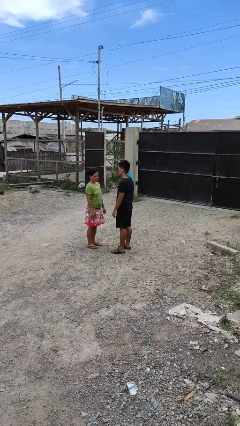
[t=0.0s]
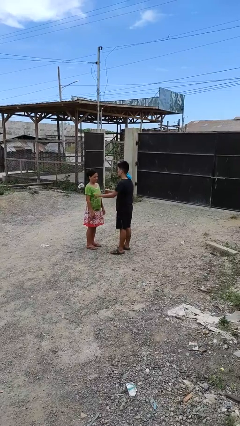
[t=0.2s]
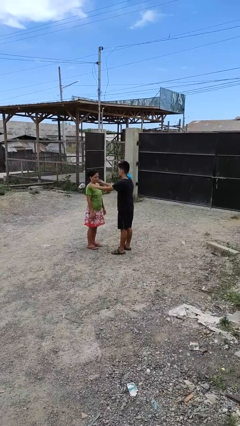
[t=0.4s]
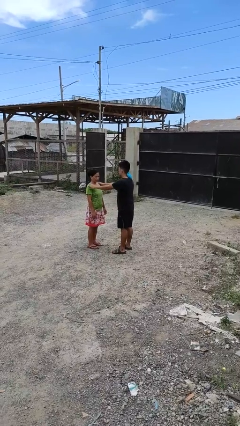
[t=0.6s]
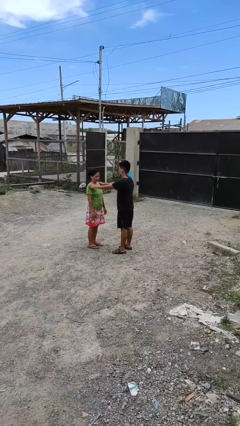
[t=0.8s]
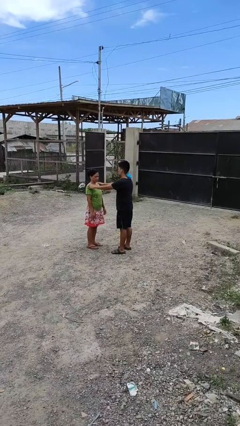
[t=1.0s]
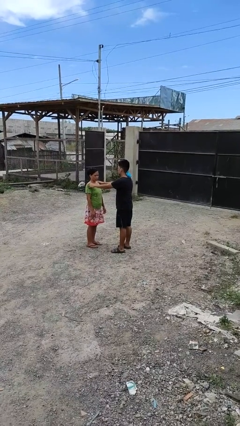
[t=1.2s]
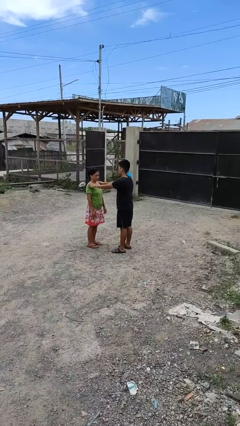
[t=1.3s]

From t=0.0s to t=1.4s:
person grabs person by shoulder

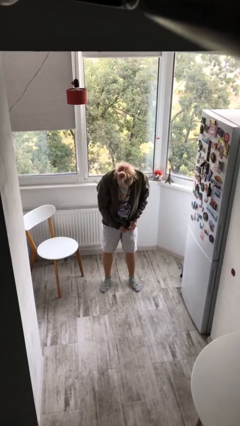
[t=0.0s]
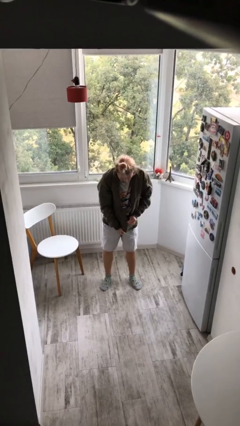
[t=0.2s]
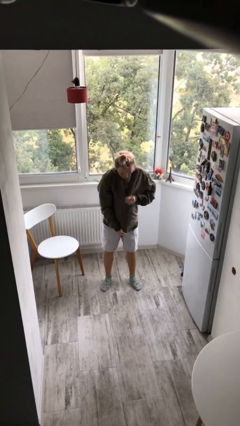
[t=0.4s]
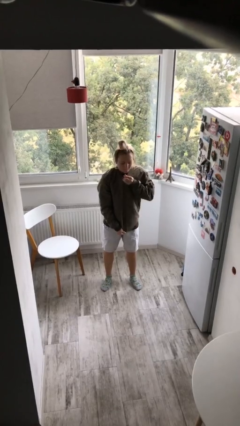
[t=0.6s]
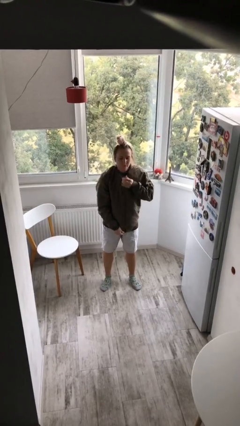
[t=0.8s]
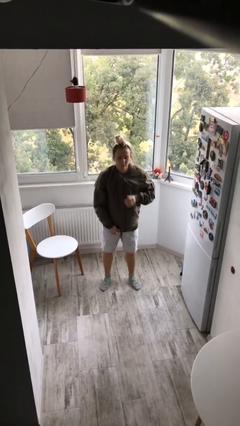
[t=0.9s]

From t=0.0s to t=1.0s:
person zips up jacket

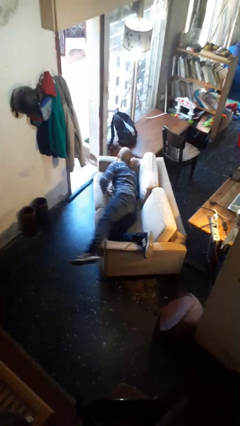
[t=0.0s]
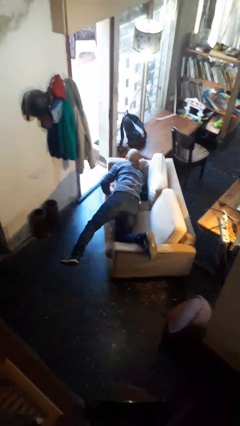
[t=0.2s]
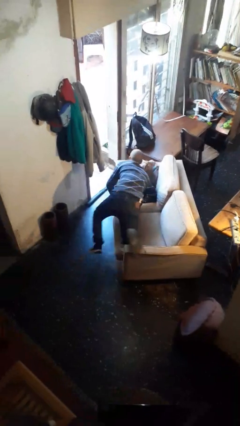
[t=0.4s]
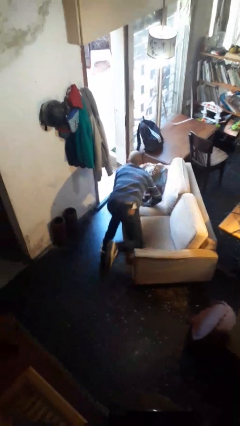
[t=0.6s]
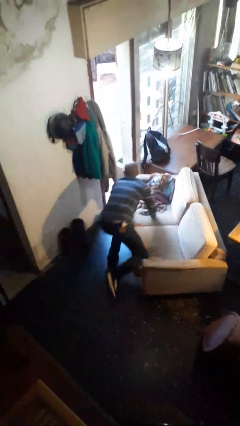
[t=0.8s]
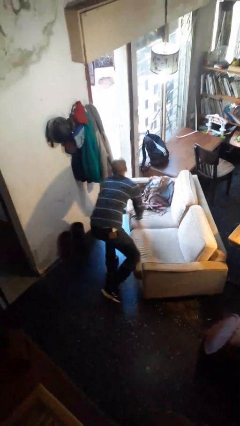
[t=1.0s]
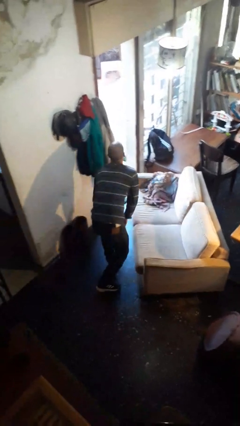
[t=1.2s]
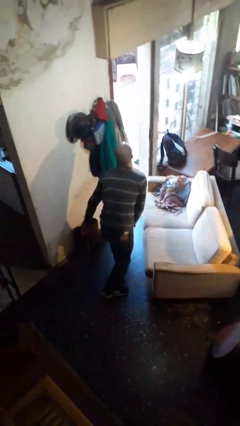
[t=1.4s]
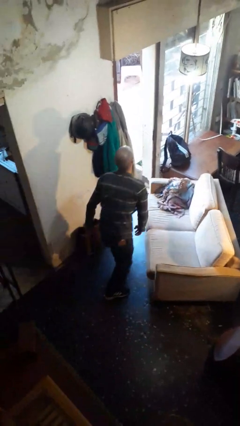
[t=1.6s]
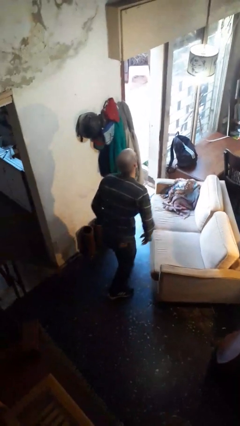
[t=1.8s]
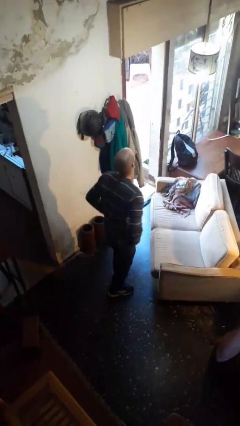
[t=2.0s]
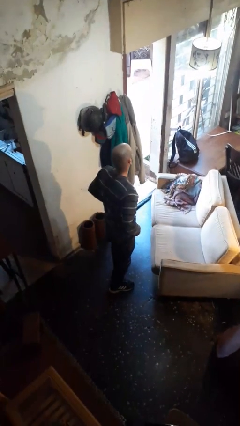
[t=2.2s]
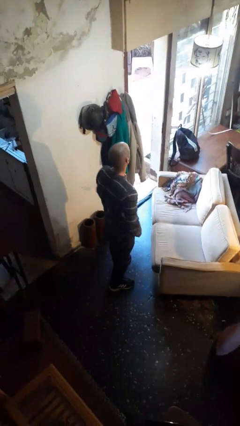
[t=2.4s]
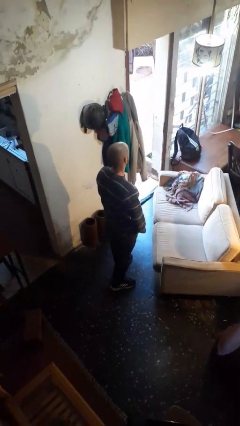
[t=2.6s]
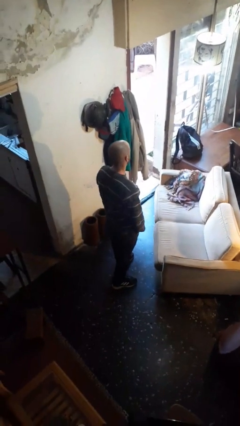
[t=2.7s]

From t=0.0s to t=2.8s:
person stands up

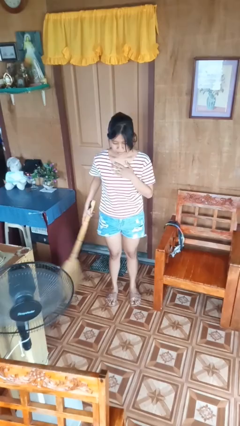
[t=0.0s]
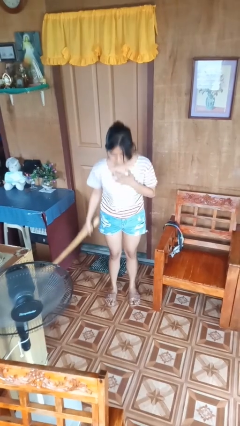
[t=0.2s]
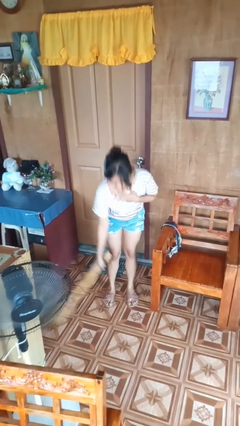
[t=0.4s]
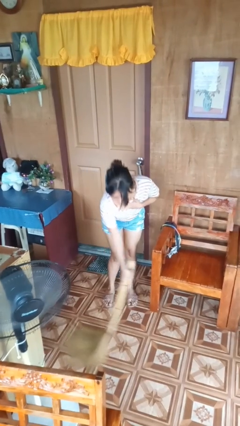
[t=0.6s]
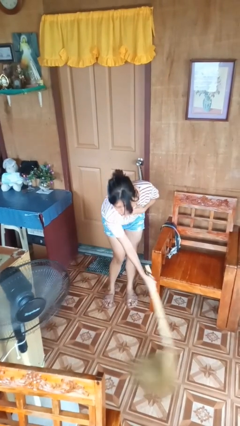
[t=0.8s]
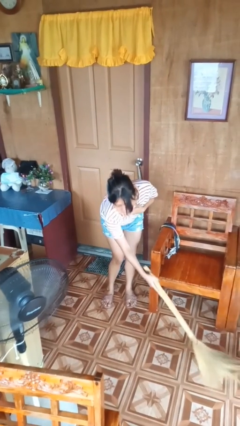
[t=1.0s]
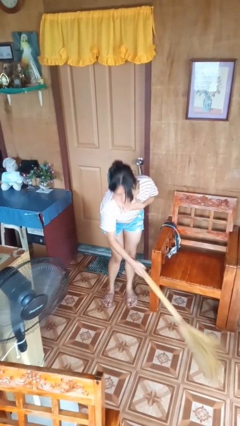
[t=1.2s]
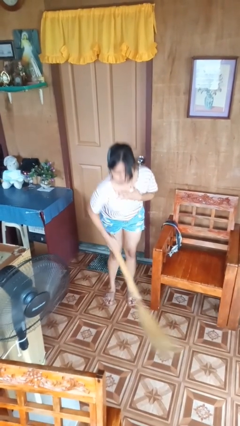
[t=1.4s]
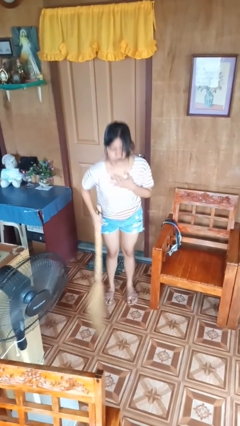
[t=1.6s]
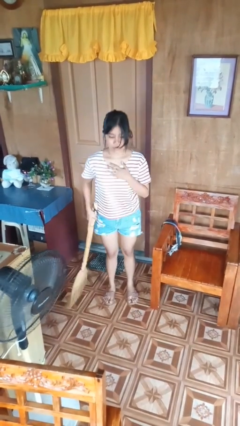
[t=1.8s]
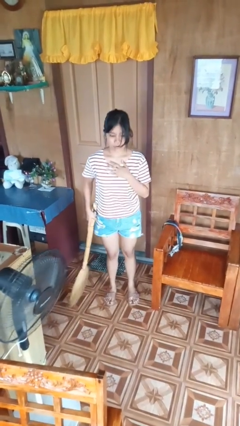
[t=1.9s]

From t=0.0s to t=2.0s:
person sweeps floor

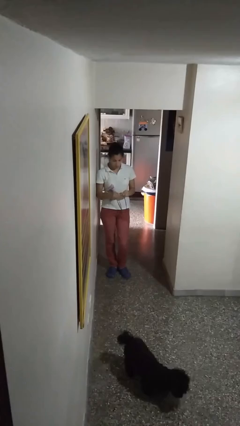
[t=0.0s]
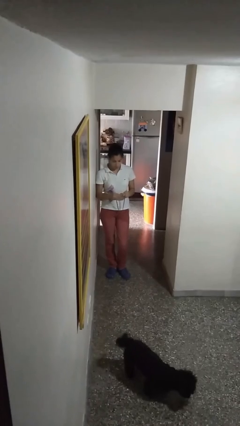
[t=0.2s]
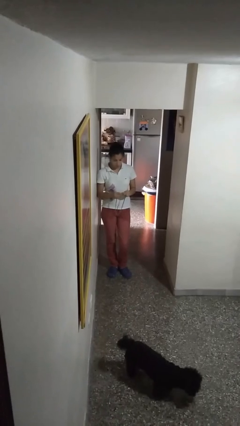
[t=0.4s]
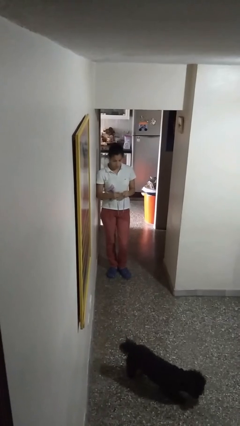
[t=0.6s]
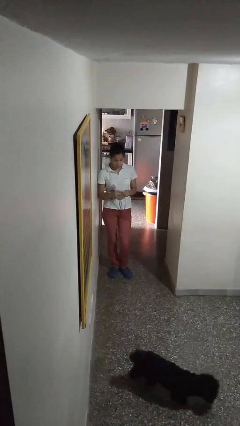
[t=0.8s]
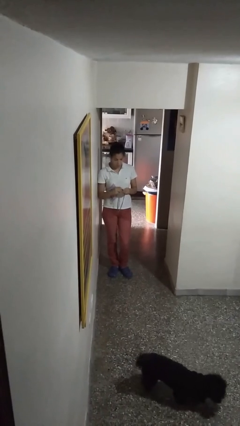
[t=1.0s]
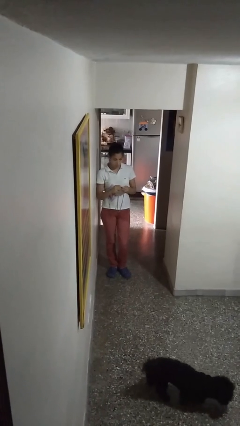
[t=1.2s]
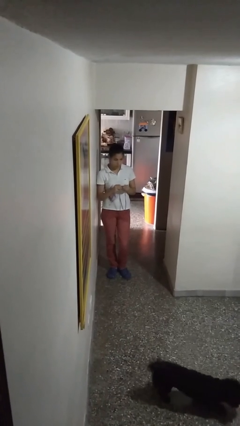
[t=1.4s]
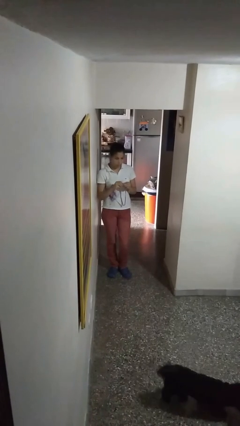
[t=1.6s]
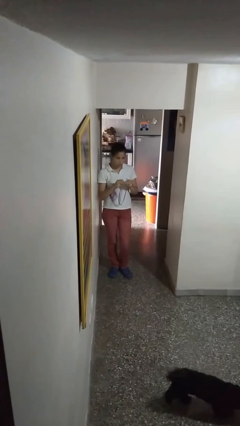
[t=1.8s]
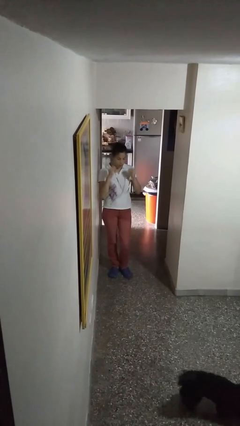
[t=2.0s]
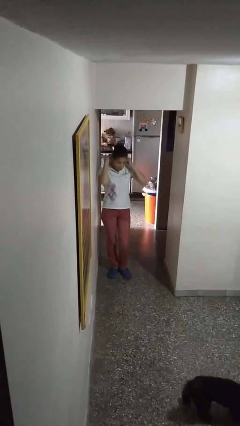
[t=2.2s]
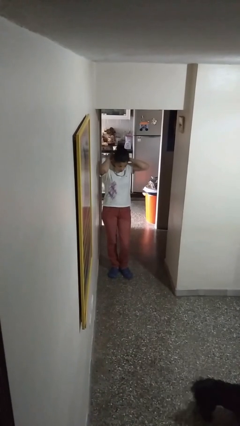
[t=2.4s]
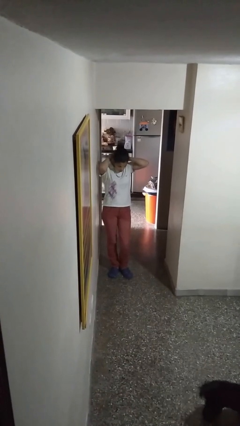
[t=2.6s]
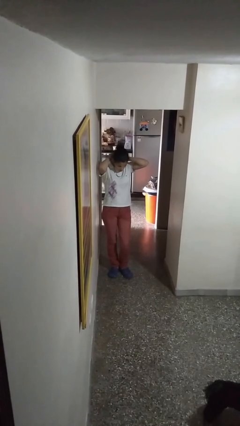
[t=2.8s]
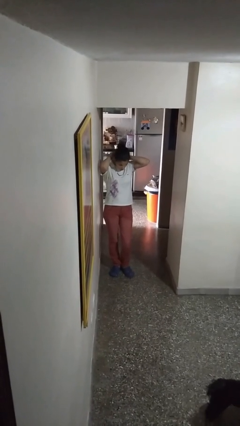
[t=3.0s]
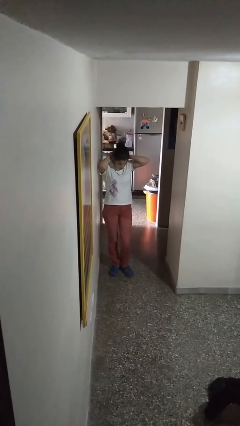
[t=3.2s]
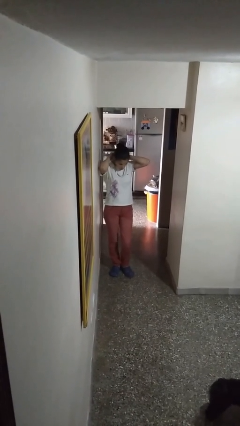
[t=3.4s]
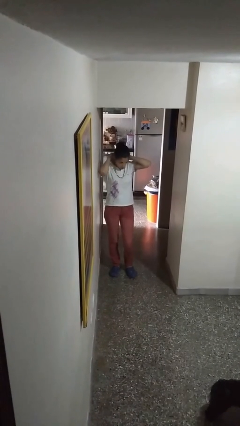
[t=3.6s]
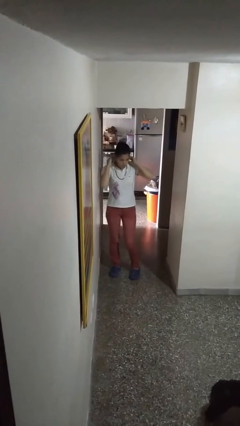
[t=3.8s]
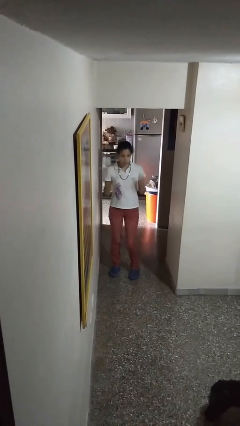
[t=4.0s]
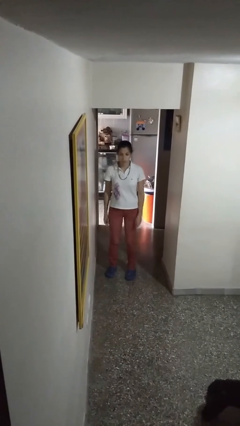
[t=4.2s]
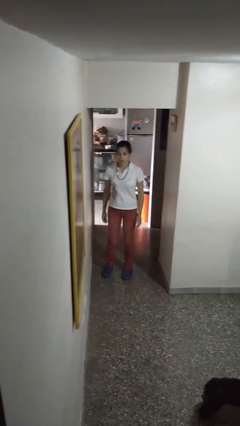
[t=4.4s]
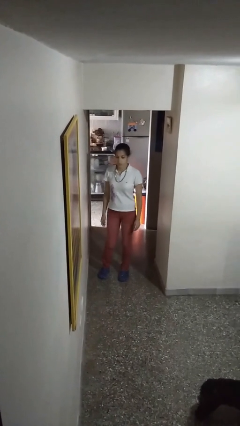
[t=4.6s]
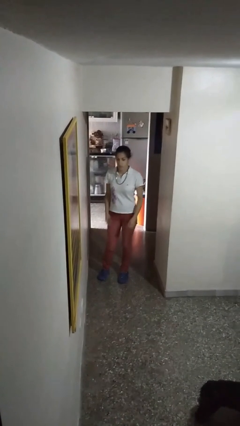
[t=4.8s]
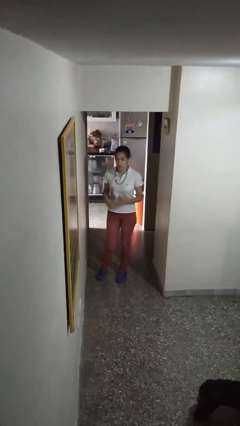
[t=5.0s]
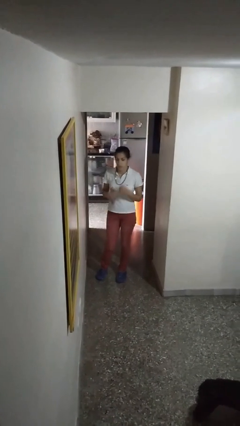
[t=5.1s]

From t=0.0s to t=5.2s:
person puts on necklace

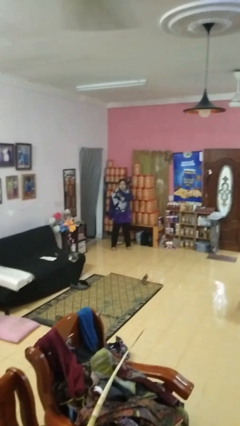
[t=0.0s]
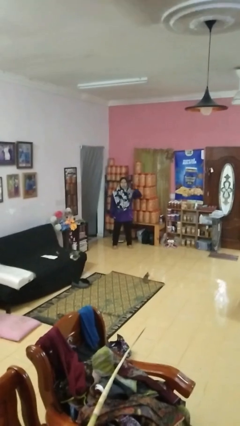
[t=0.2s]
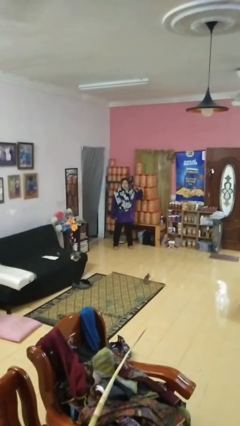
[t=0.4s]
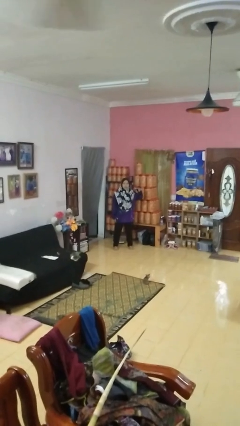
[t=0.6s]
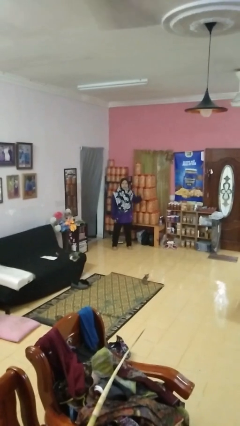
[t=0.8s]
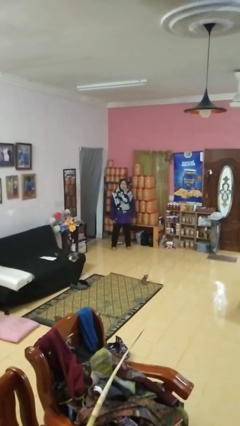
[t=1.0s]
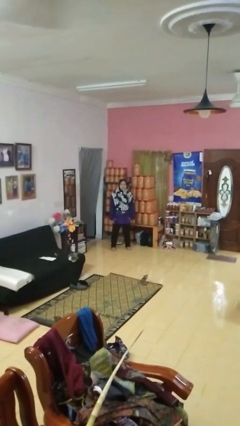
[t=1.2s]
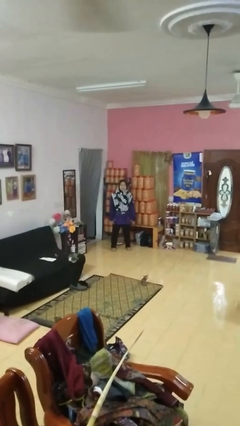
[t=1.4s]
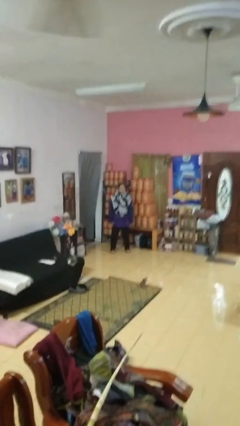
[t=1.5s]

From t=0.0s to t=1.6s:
person gestures cut

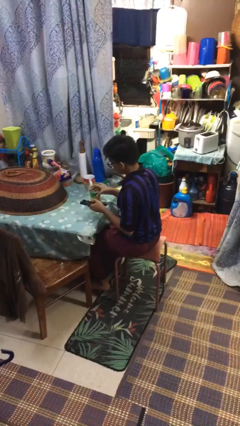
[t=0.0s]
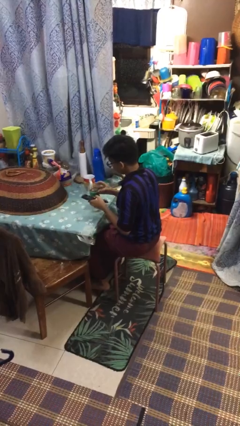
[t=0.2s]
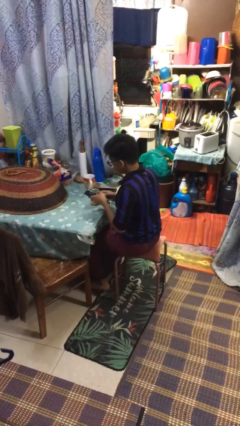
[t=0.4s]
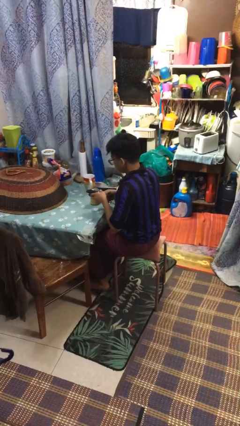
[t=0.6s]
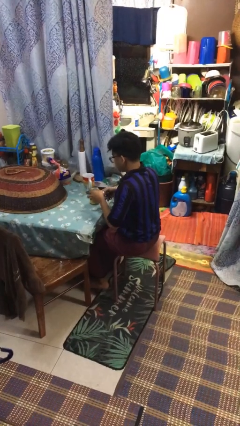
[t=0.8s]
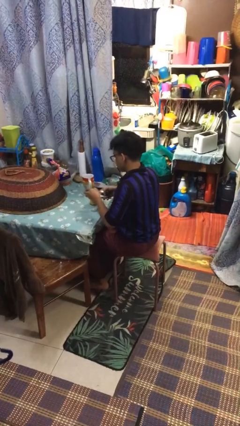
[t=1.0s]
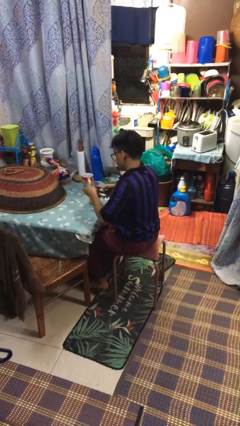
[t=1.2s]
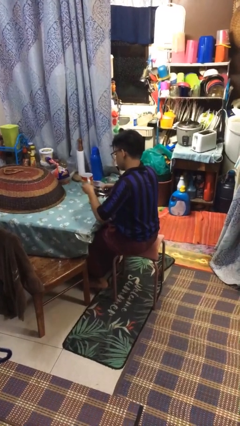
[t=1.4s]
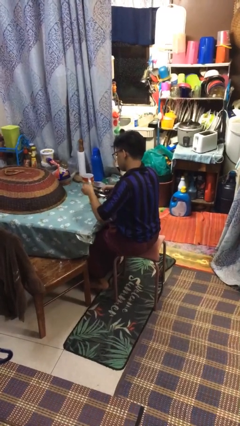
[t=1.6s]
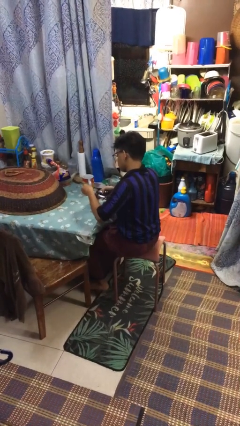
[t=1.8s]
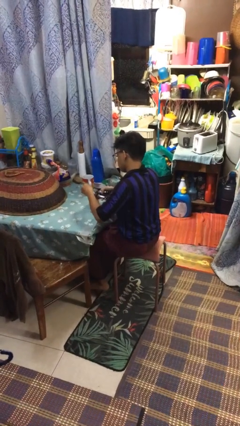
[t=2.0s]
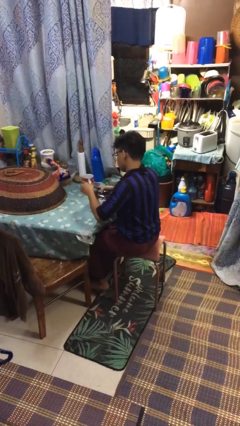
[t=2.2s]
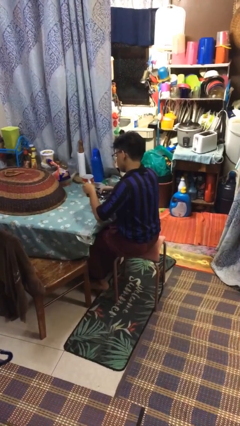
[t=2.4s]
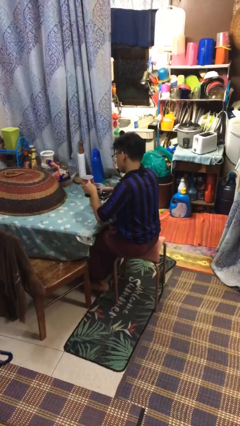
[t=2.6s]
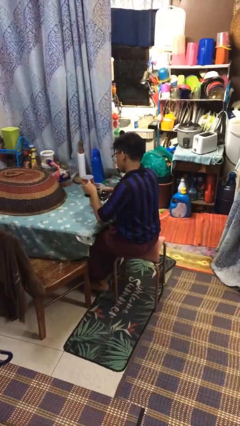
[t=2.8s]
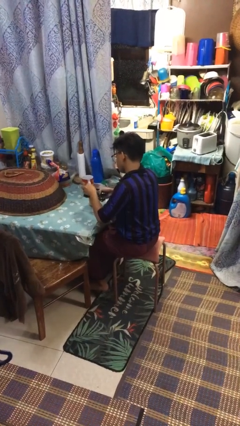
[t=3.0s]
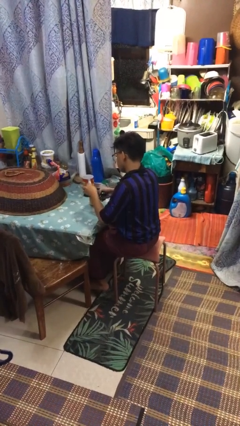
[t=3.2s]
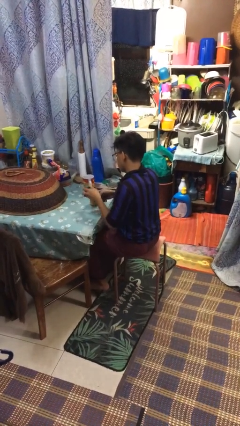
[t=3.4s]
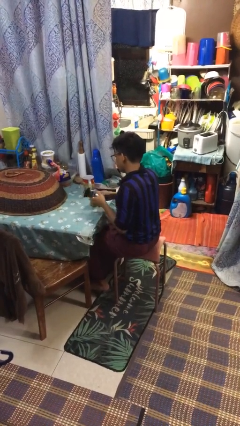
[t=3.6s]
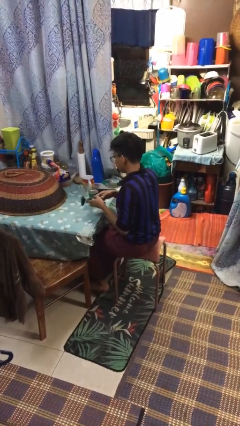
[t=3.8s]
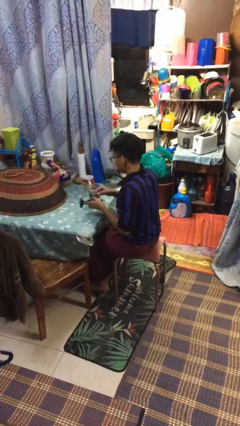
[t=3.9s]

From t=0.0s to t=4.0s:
person opens can with can opener
